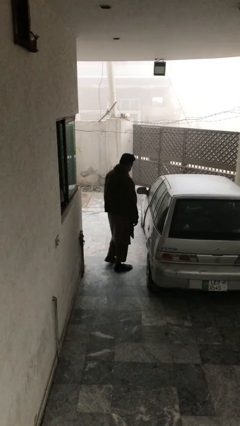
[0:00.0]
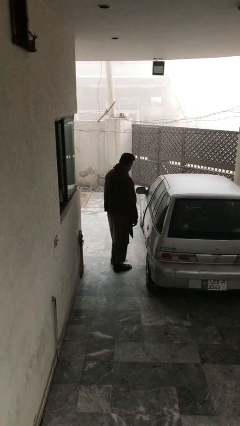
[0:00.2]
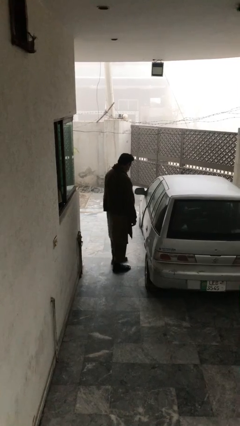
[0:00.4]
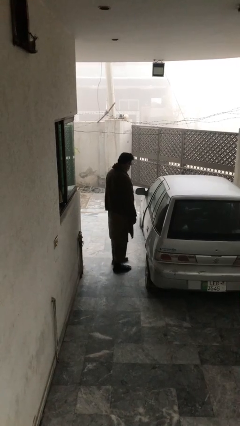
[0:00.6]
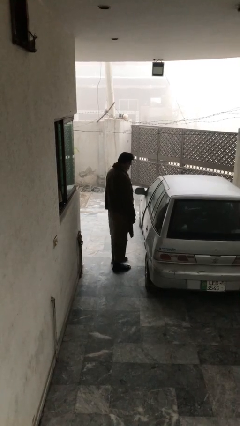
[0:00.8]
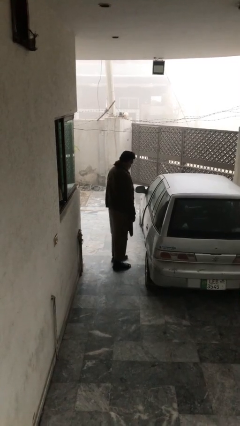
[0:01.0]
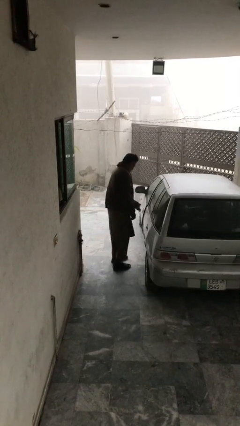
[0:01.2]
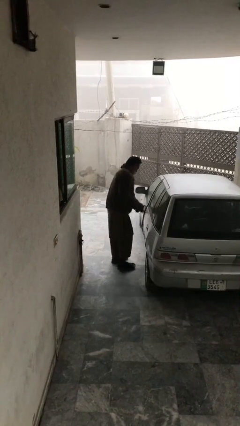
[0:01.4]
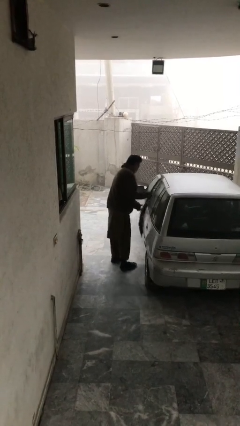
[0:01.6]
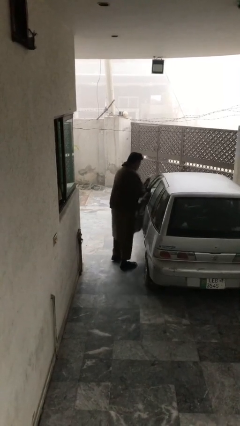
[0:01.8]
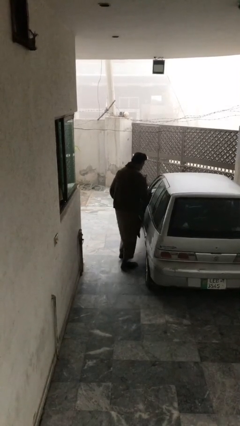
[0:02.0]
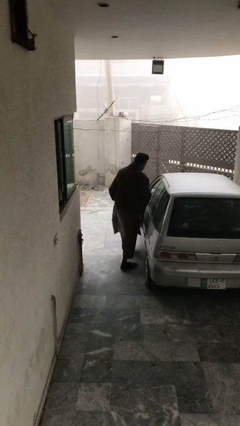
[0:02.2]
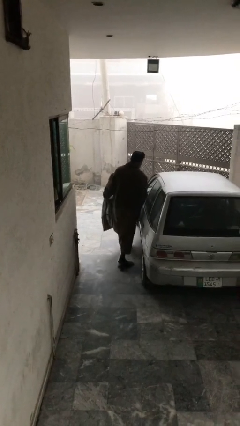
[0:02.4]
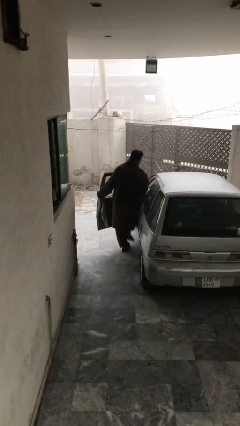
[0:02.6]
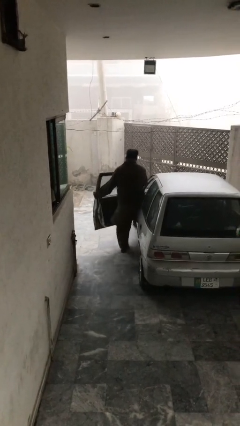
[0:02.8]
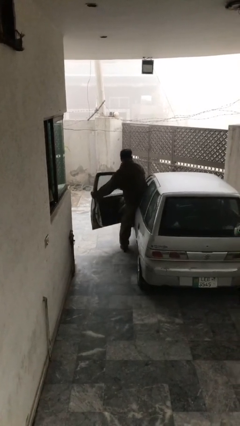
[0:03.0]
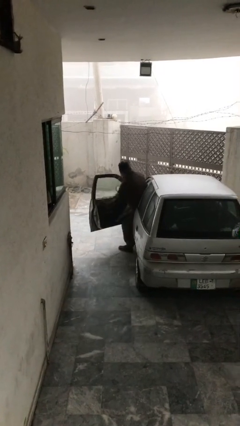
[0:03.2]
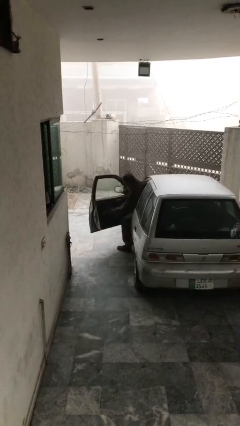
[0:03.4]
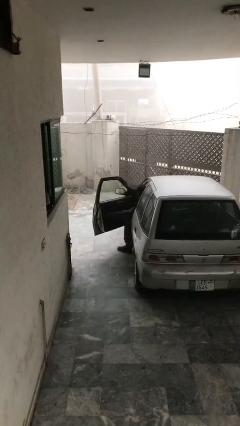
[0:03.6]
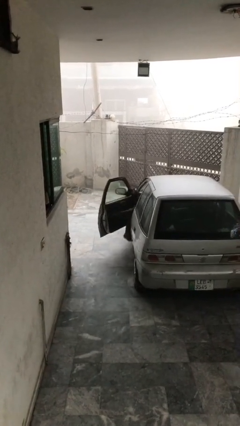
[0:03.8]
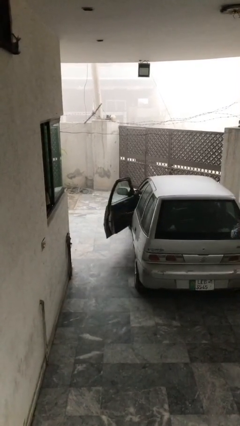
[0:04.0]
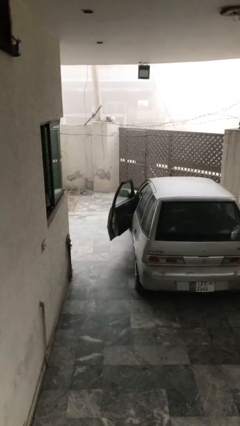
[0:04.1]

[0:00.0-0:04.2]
car picks up person

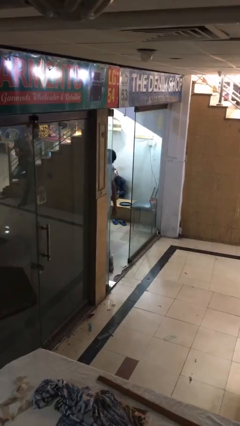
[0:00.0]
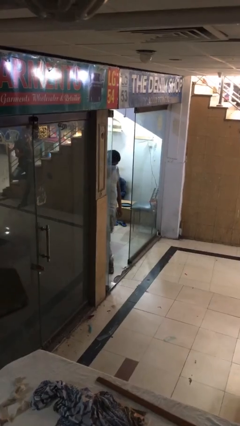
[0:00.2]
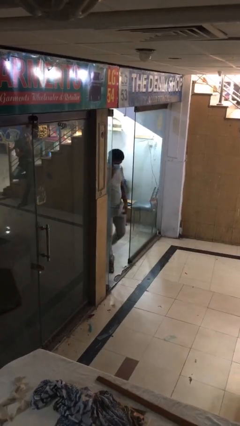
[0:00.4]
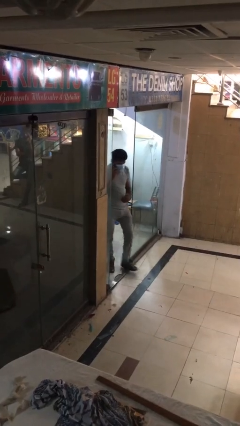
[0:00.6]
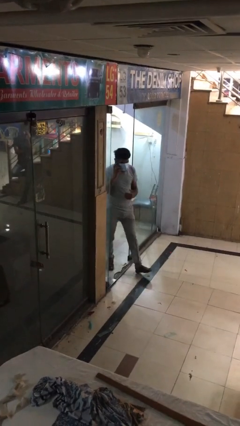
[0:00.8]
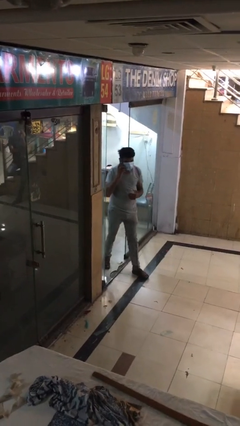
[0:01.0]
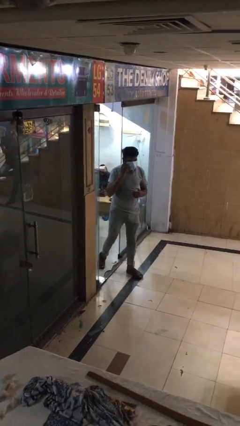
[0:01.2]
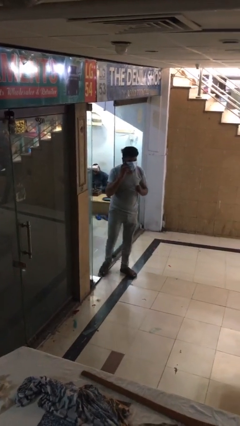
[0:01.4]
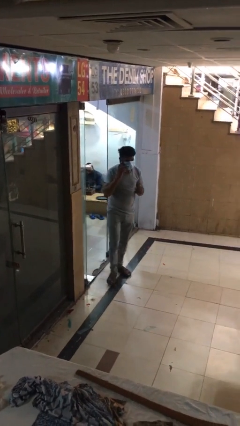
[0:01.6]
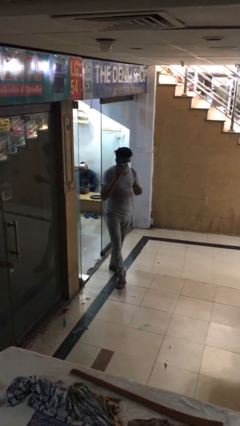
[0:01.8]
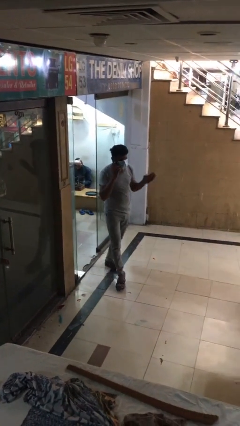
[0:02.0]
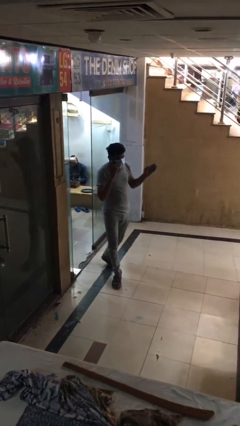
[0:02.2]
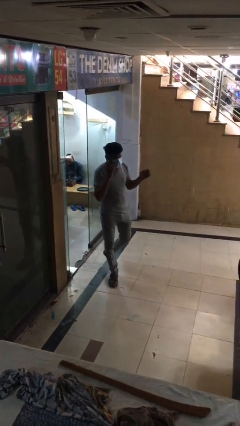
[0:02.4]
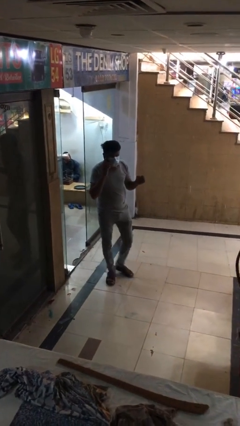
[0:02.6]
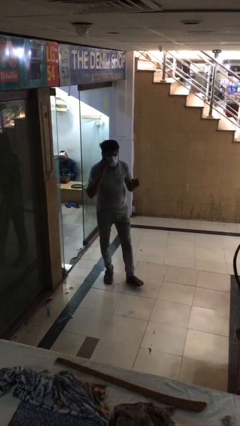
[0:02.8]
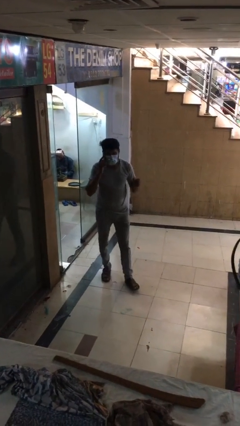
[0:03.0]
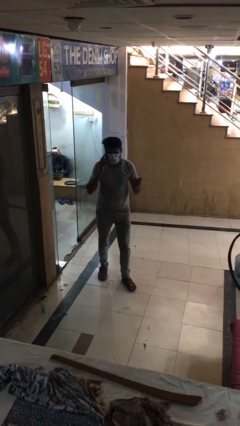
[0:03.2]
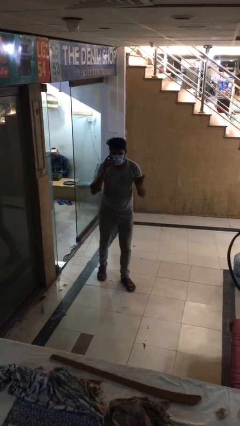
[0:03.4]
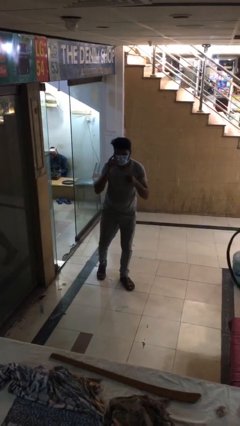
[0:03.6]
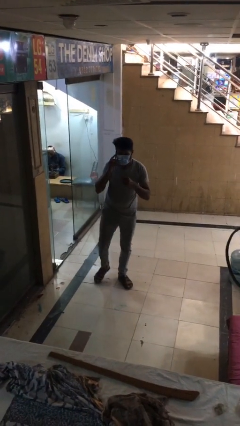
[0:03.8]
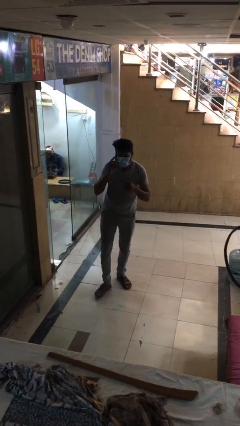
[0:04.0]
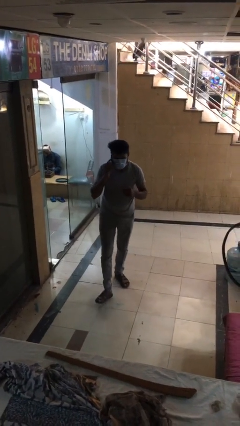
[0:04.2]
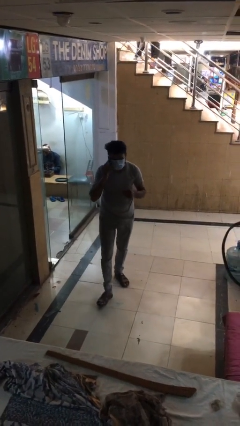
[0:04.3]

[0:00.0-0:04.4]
person enters scene through structure

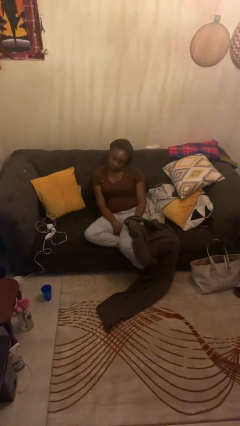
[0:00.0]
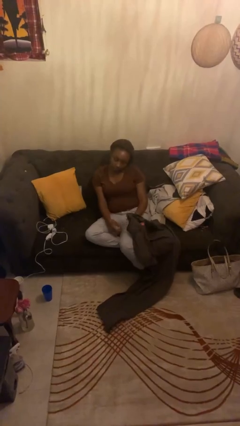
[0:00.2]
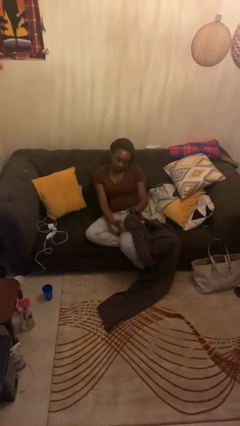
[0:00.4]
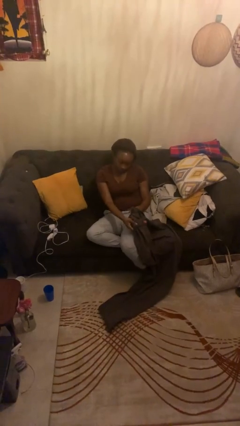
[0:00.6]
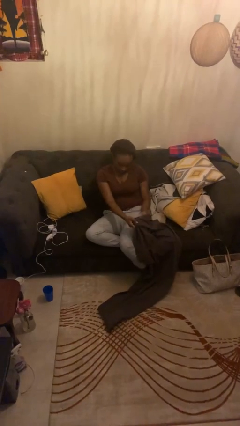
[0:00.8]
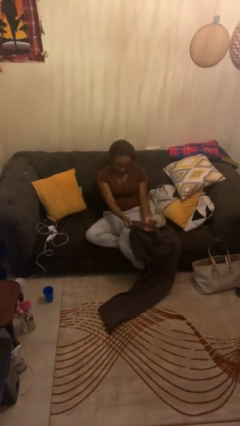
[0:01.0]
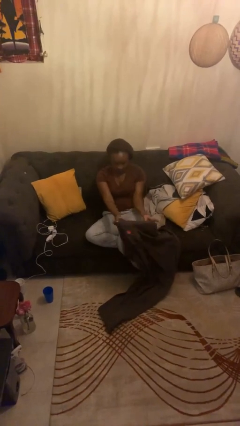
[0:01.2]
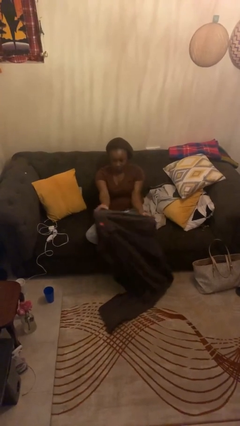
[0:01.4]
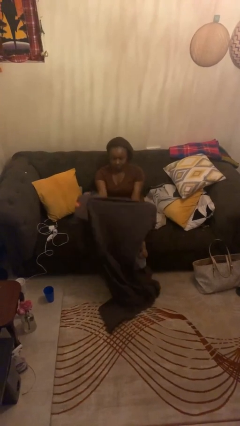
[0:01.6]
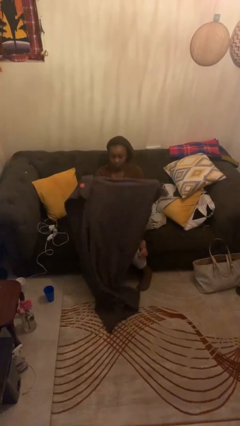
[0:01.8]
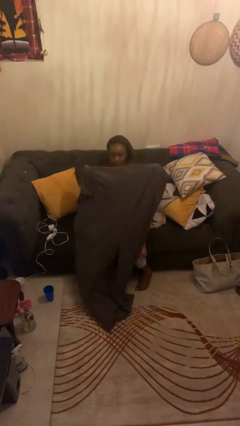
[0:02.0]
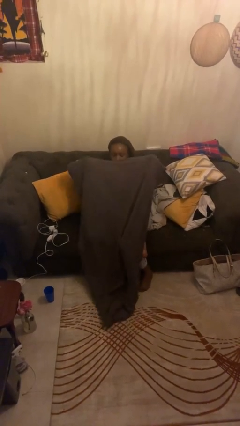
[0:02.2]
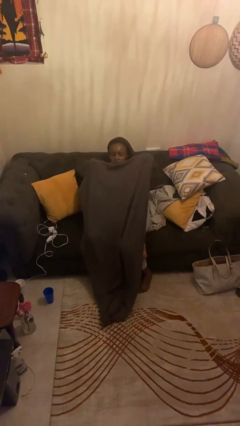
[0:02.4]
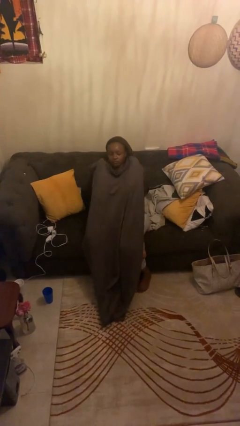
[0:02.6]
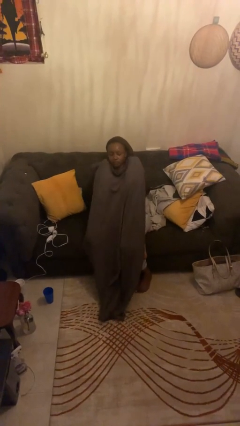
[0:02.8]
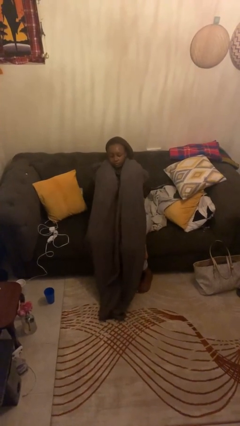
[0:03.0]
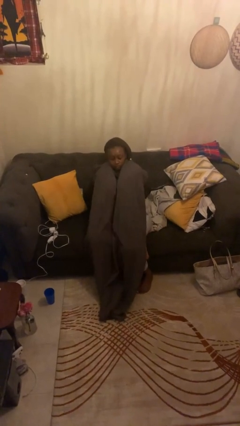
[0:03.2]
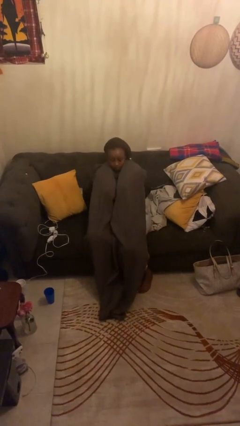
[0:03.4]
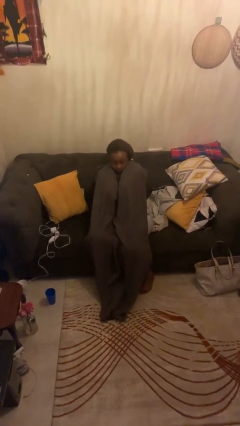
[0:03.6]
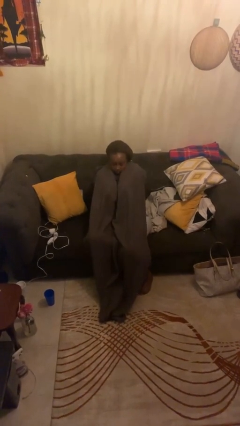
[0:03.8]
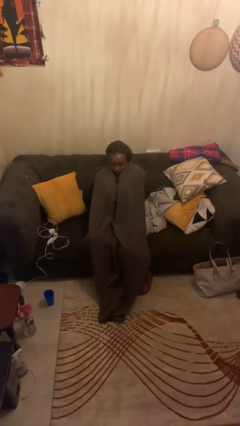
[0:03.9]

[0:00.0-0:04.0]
person covers with blanket

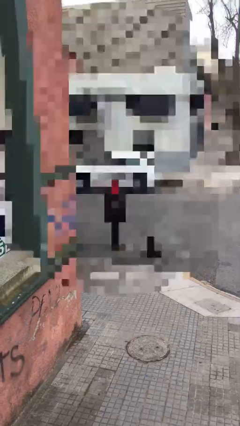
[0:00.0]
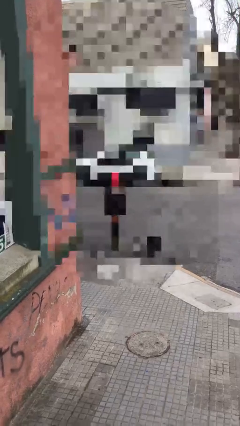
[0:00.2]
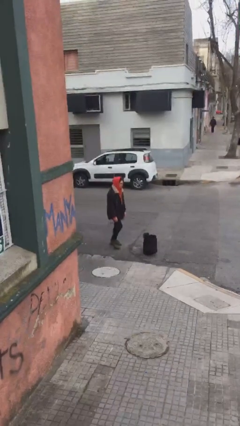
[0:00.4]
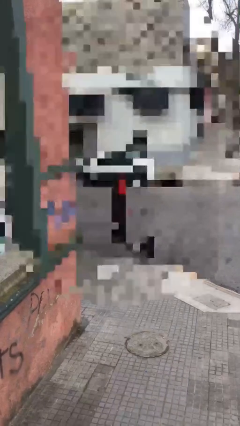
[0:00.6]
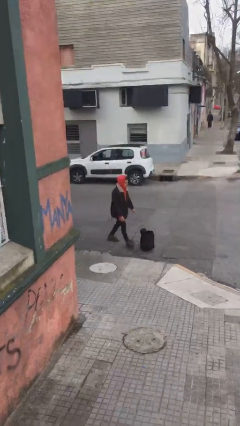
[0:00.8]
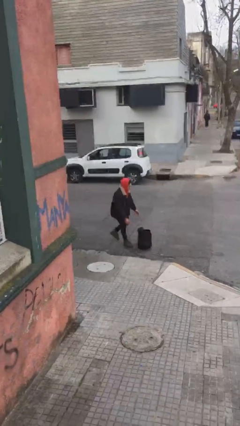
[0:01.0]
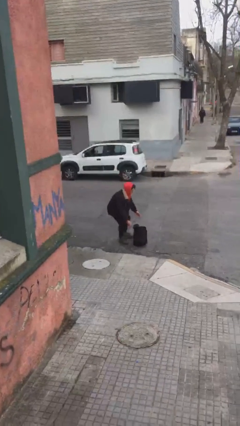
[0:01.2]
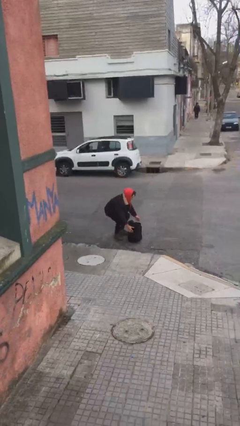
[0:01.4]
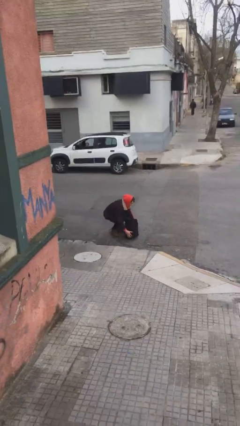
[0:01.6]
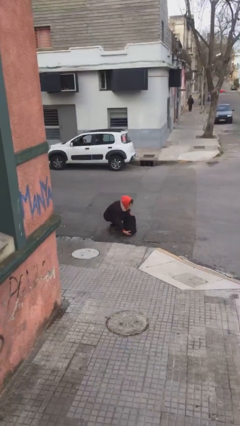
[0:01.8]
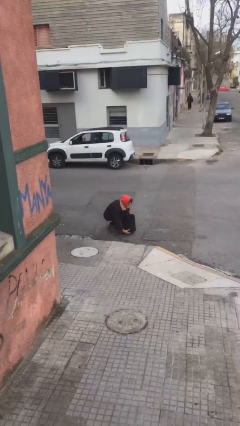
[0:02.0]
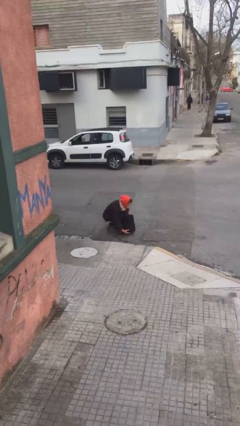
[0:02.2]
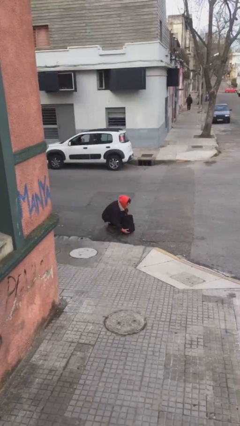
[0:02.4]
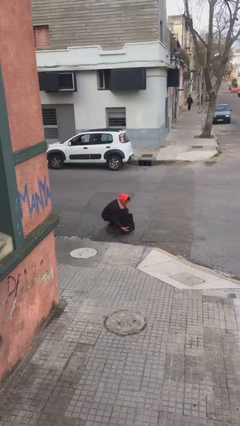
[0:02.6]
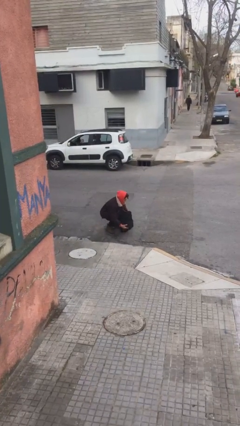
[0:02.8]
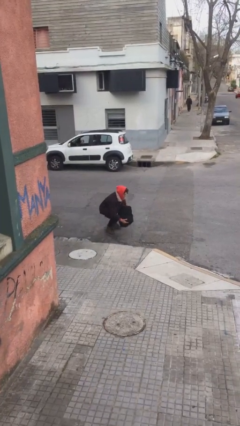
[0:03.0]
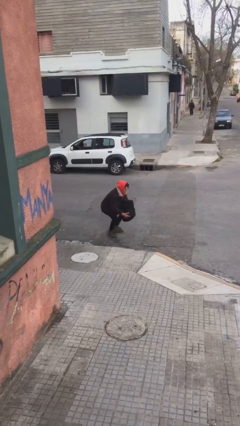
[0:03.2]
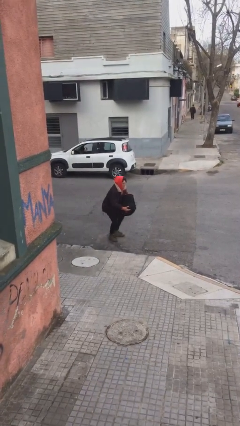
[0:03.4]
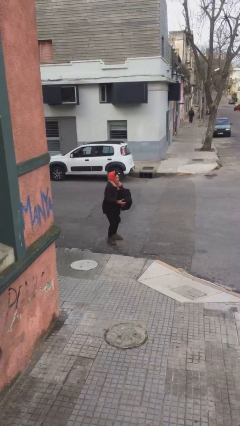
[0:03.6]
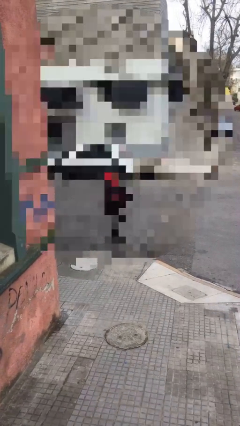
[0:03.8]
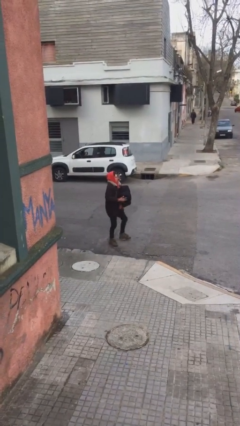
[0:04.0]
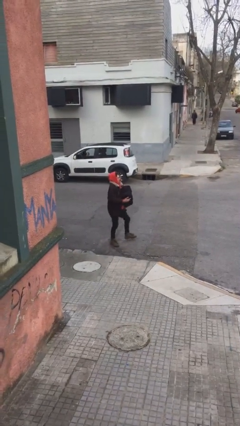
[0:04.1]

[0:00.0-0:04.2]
person picks up object from floor

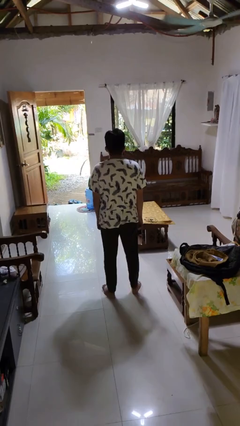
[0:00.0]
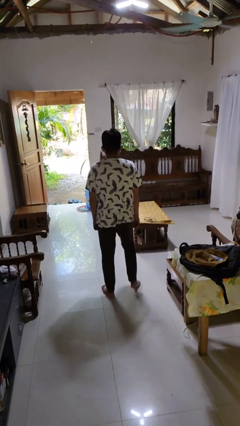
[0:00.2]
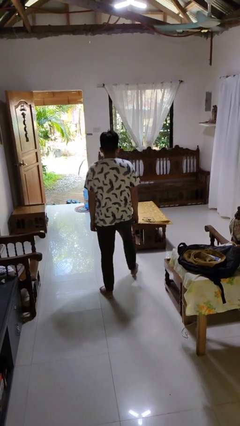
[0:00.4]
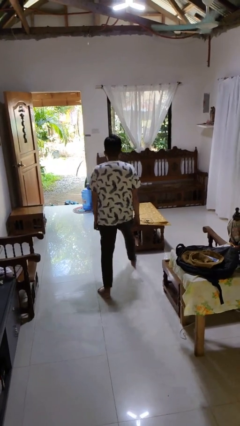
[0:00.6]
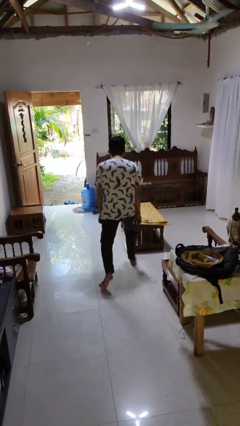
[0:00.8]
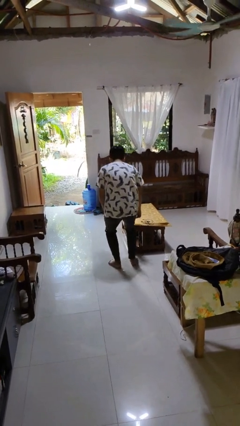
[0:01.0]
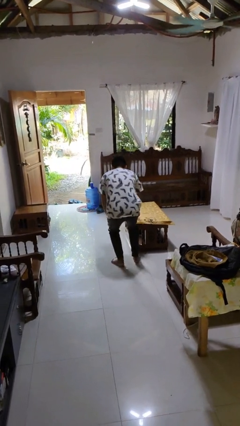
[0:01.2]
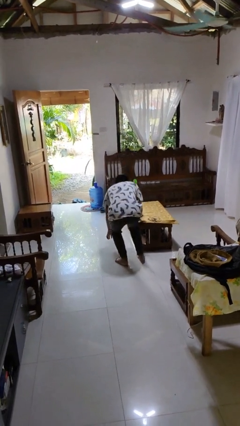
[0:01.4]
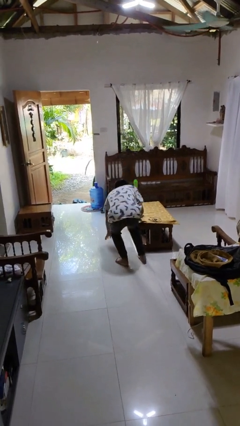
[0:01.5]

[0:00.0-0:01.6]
person trips on object on floor
